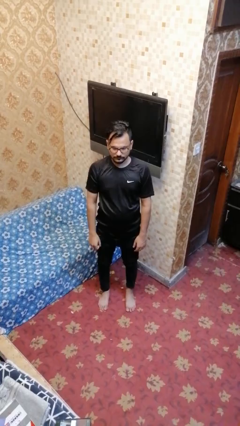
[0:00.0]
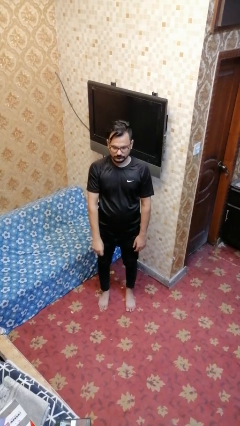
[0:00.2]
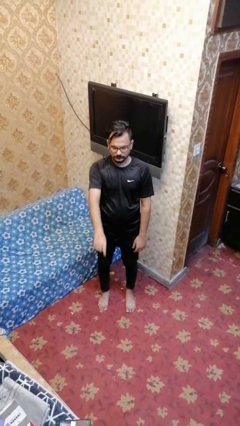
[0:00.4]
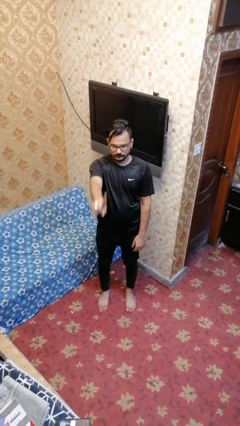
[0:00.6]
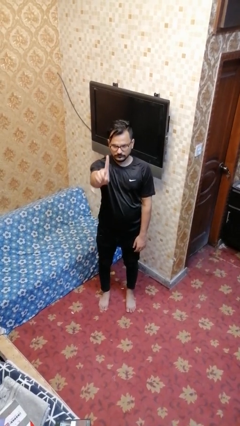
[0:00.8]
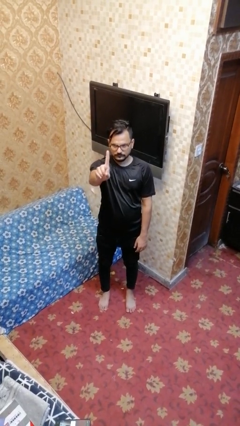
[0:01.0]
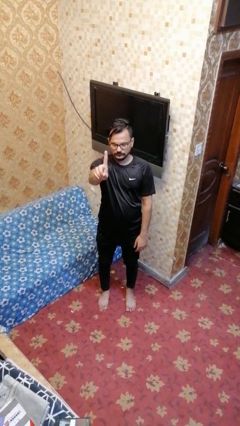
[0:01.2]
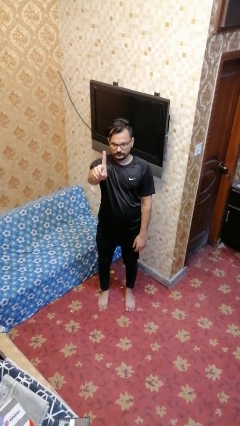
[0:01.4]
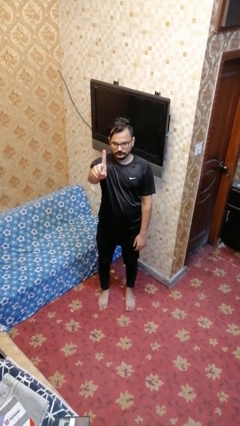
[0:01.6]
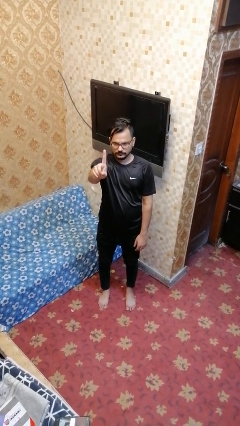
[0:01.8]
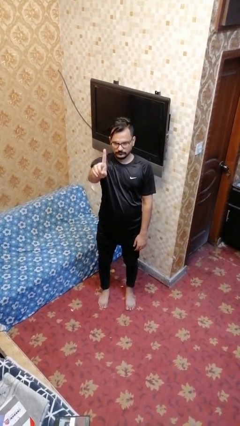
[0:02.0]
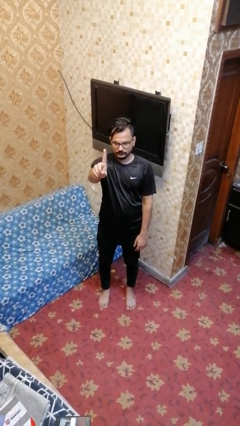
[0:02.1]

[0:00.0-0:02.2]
person gestures number one

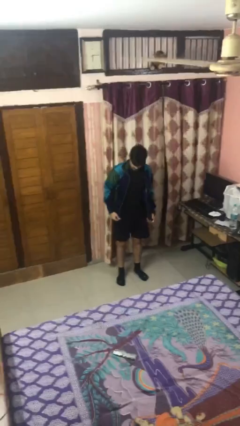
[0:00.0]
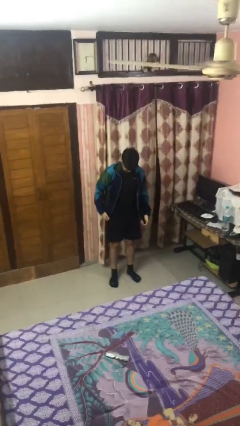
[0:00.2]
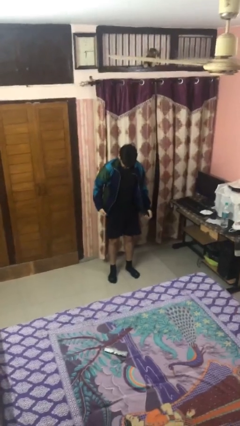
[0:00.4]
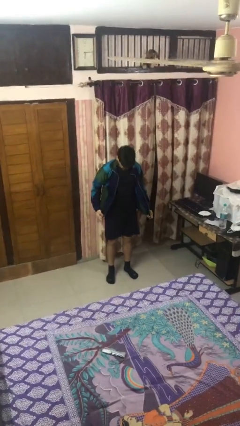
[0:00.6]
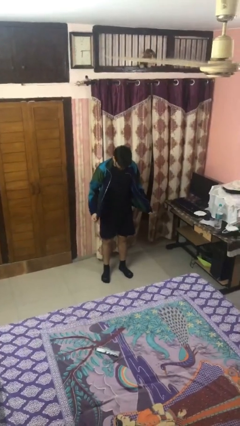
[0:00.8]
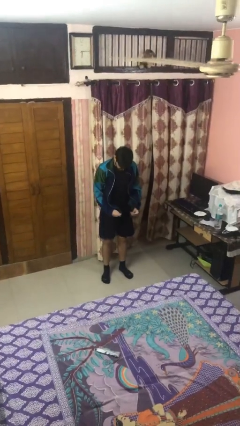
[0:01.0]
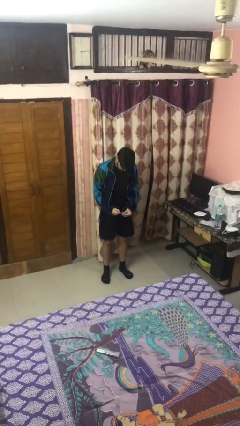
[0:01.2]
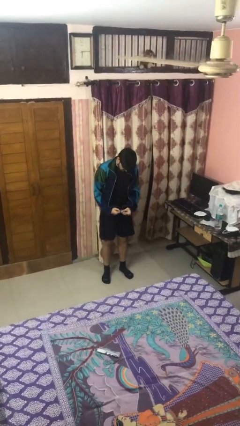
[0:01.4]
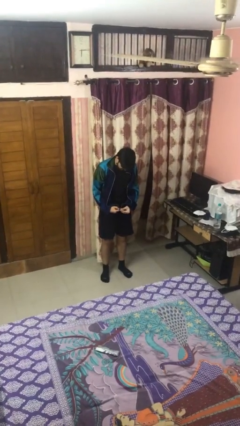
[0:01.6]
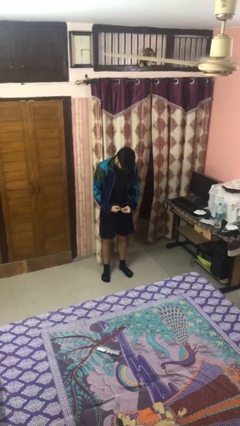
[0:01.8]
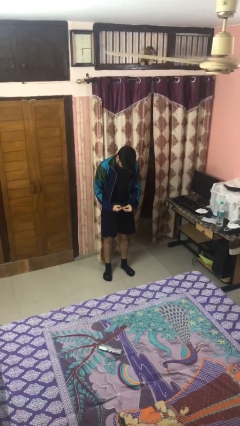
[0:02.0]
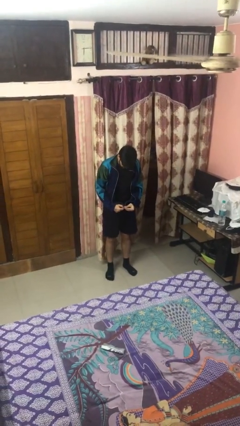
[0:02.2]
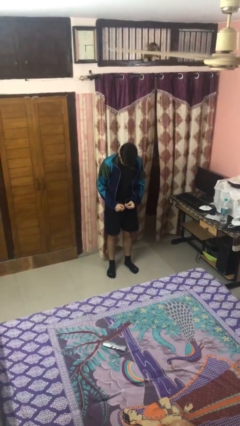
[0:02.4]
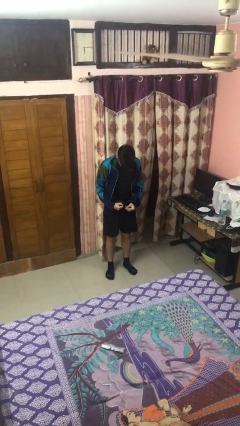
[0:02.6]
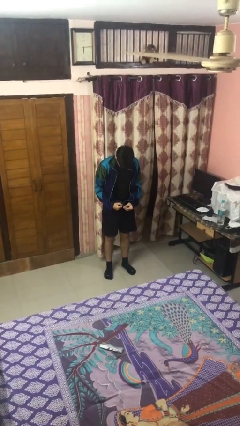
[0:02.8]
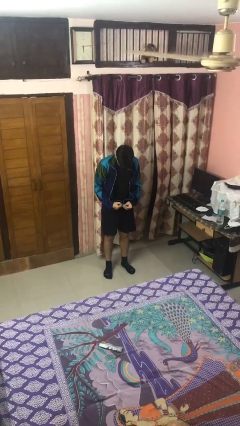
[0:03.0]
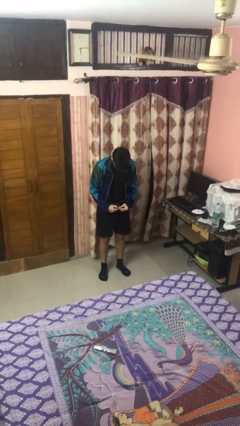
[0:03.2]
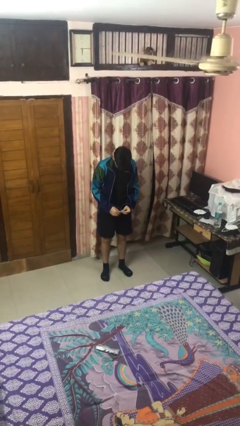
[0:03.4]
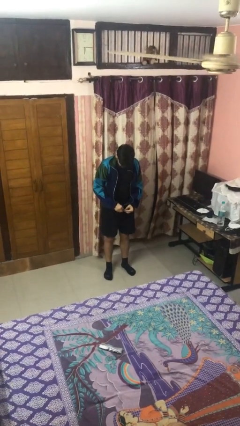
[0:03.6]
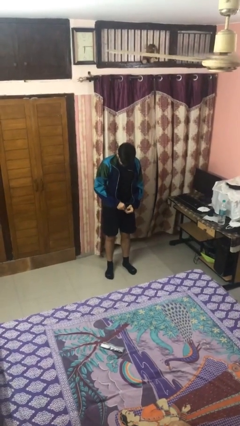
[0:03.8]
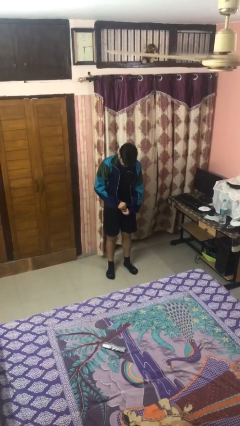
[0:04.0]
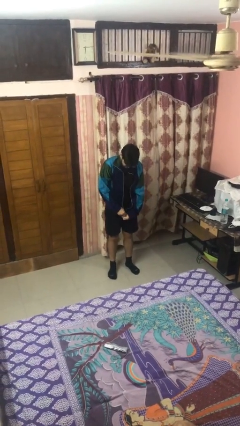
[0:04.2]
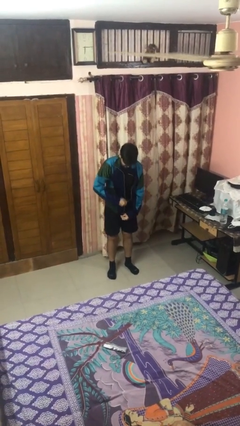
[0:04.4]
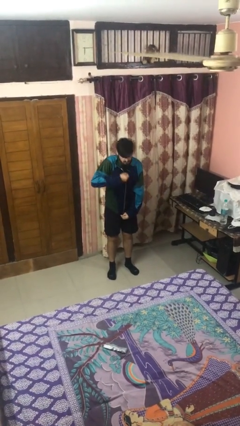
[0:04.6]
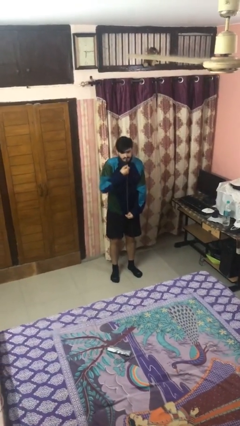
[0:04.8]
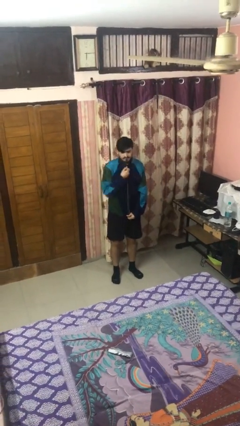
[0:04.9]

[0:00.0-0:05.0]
person zips up jacket

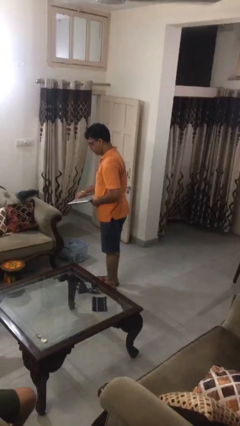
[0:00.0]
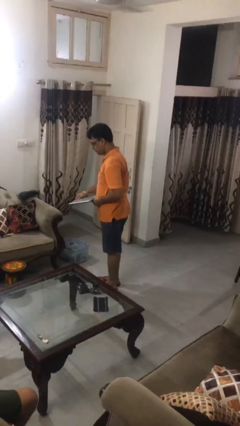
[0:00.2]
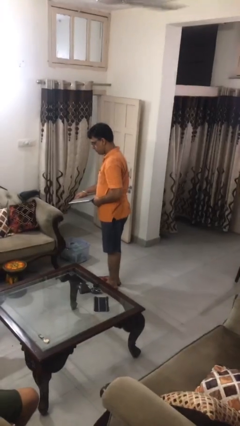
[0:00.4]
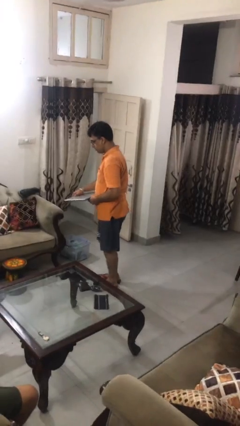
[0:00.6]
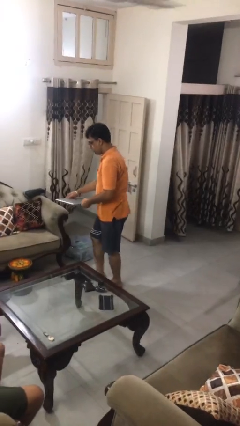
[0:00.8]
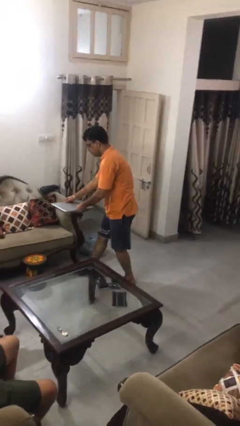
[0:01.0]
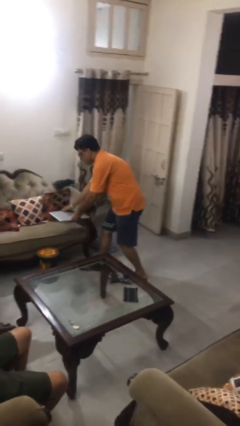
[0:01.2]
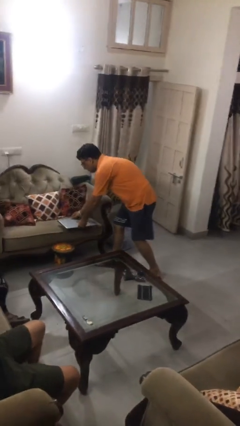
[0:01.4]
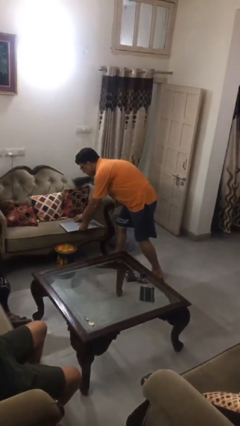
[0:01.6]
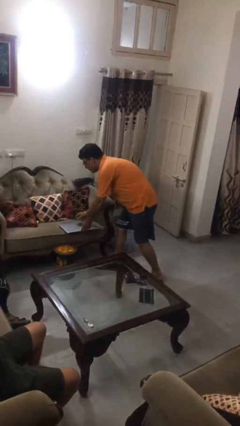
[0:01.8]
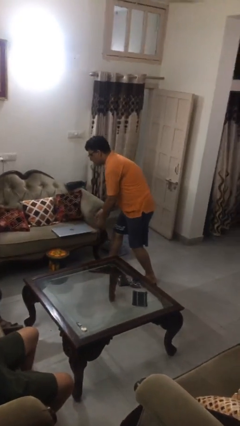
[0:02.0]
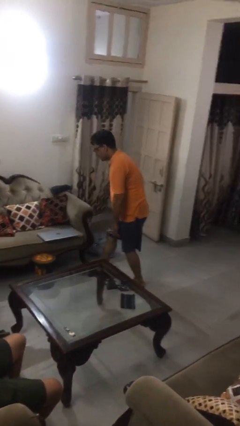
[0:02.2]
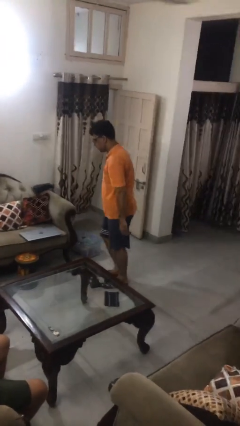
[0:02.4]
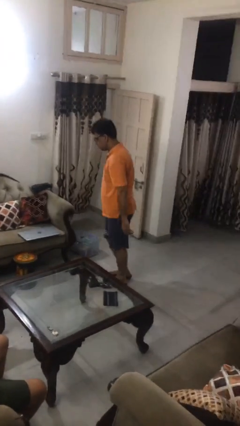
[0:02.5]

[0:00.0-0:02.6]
person puts down object on couch

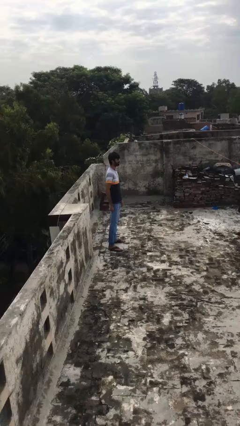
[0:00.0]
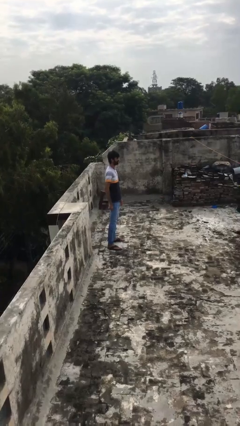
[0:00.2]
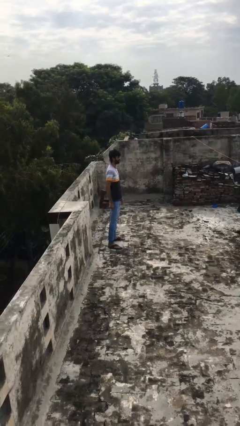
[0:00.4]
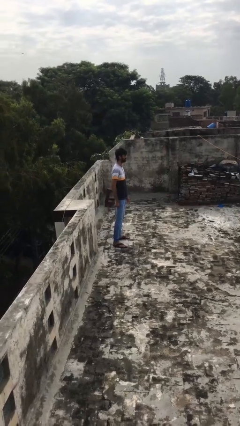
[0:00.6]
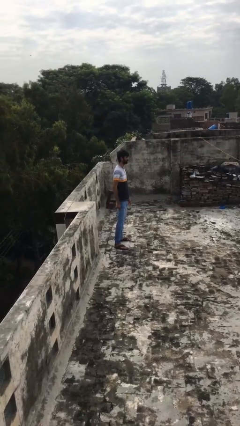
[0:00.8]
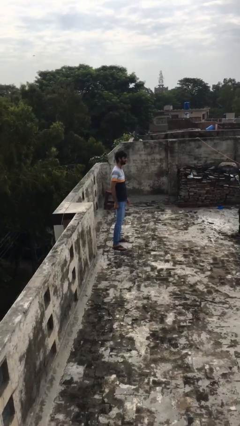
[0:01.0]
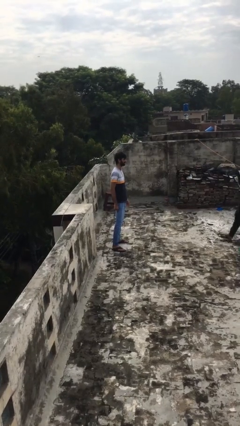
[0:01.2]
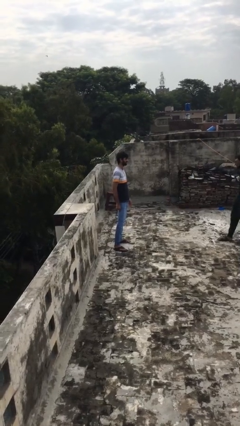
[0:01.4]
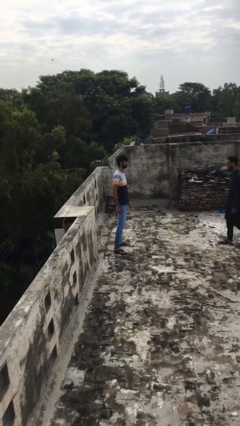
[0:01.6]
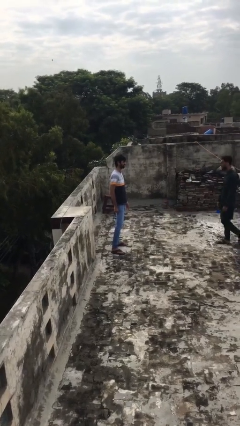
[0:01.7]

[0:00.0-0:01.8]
person embraces person

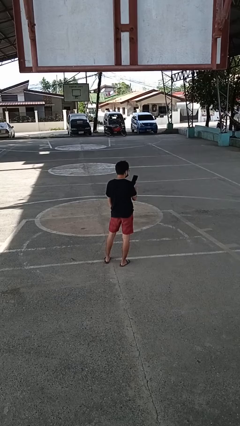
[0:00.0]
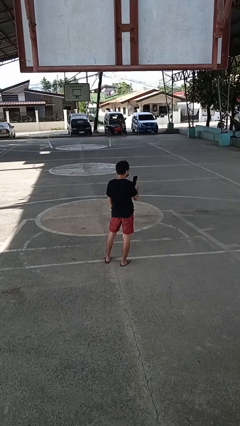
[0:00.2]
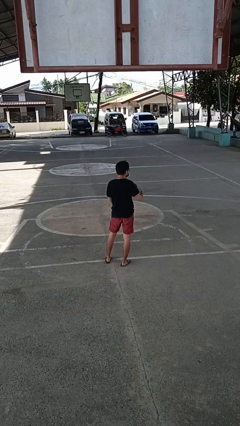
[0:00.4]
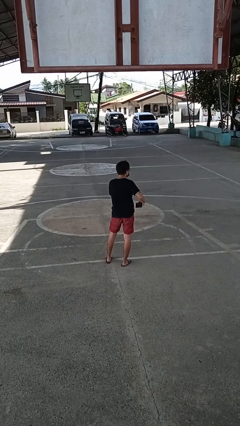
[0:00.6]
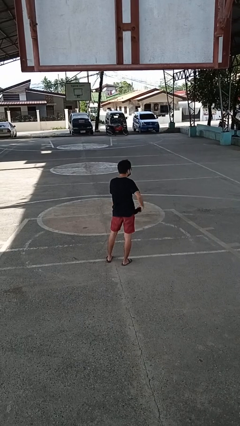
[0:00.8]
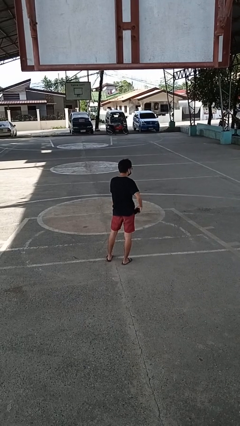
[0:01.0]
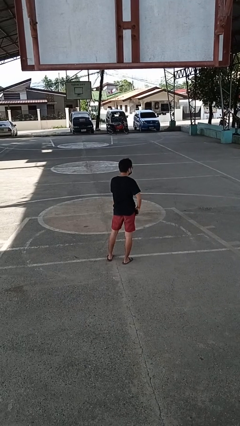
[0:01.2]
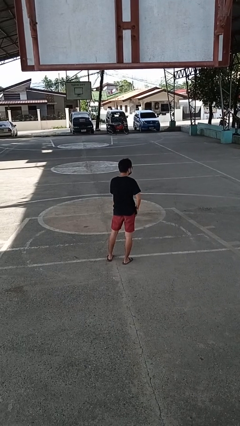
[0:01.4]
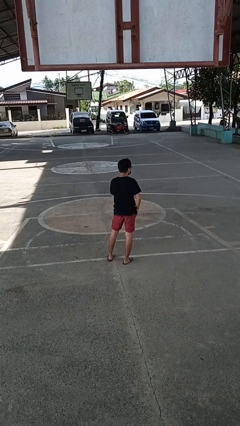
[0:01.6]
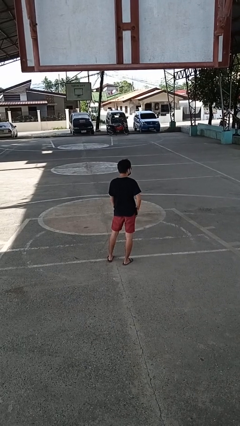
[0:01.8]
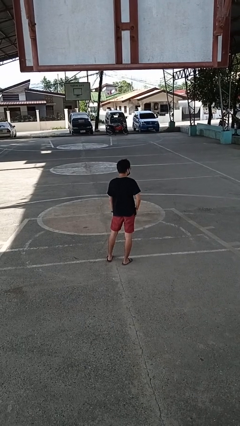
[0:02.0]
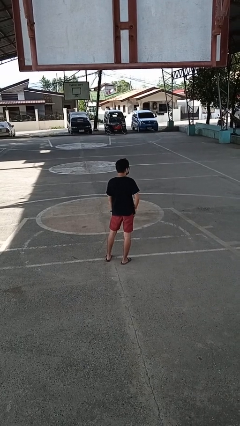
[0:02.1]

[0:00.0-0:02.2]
person puts phone into pocket

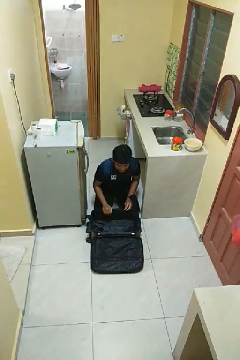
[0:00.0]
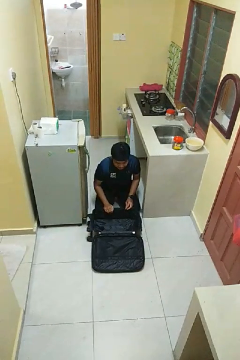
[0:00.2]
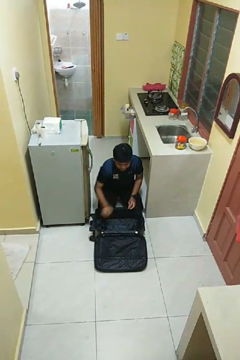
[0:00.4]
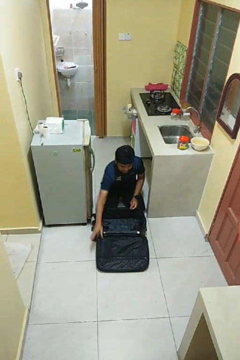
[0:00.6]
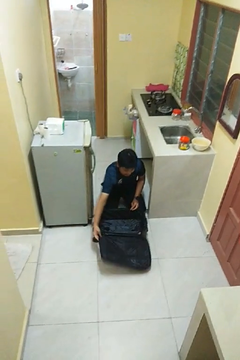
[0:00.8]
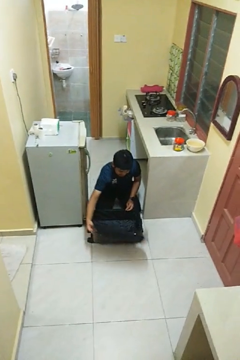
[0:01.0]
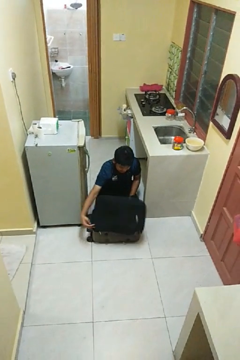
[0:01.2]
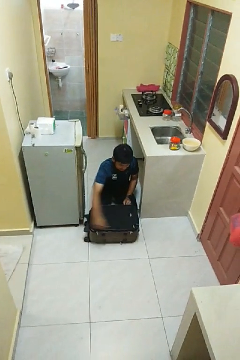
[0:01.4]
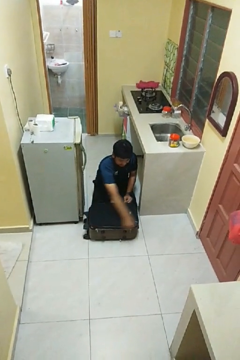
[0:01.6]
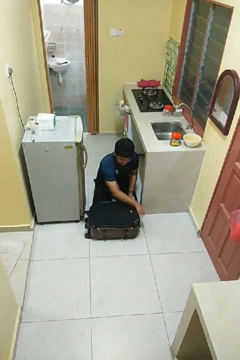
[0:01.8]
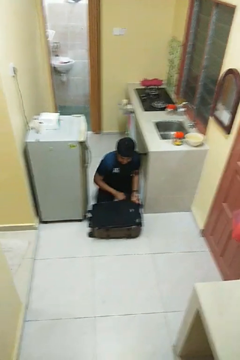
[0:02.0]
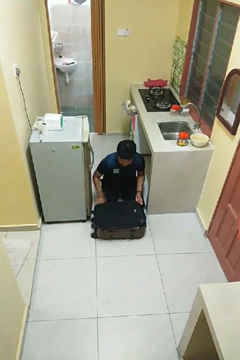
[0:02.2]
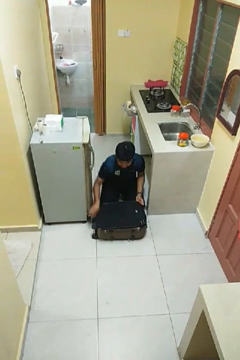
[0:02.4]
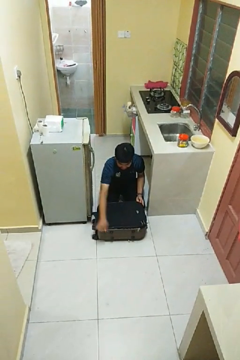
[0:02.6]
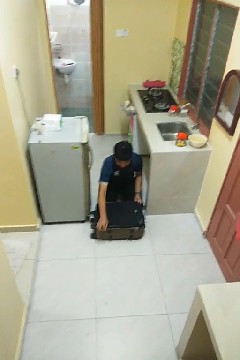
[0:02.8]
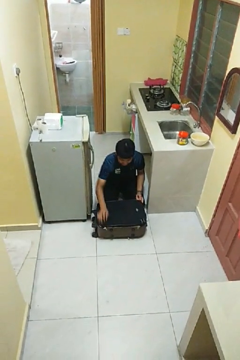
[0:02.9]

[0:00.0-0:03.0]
person closes suitcase

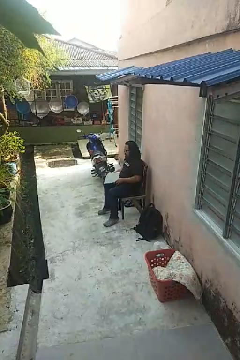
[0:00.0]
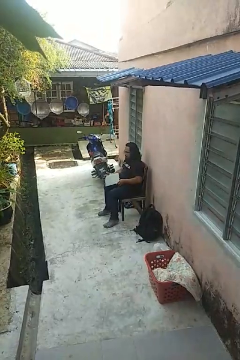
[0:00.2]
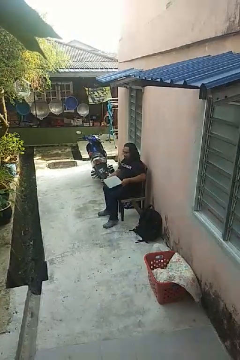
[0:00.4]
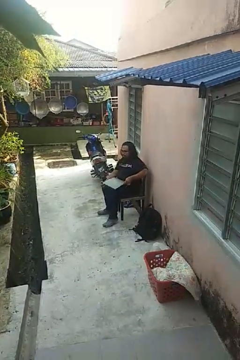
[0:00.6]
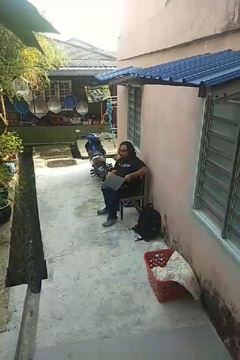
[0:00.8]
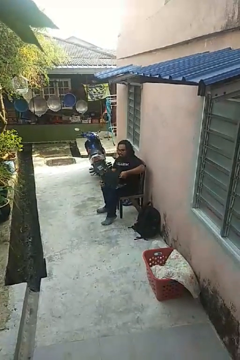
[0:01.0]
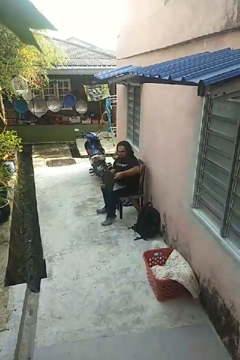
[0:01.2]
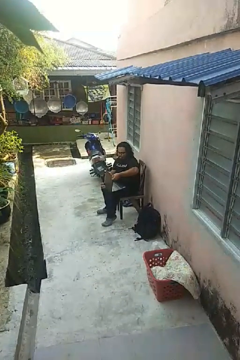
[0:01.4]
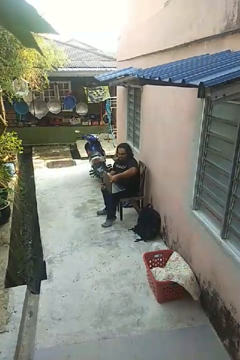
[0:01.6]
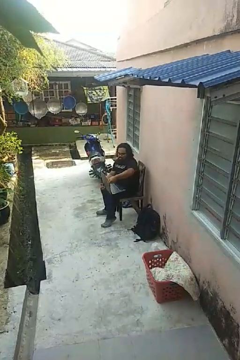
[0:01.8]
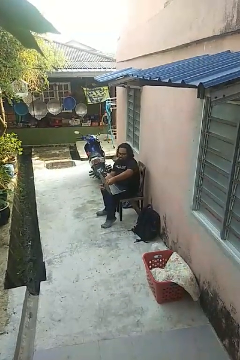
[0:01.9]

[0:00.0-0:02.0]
person opens laptop
